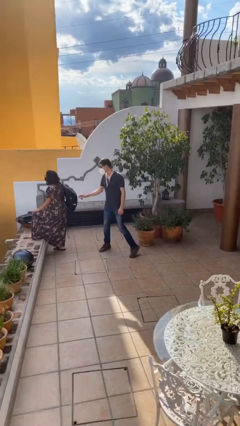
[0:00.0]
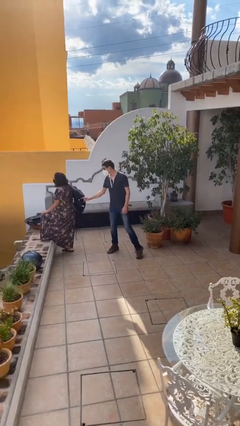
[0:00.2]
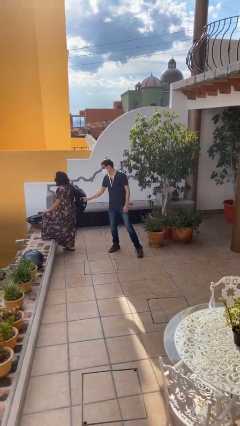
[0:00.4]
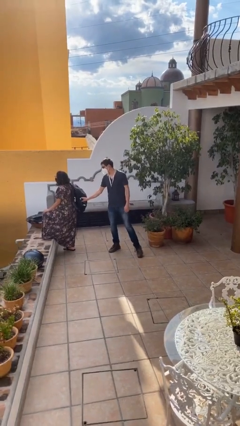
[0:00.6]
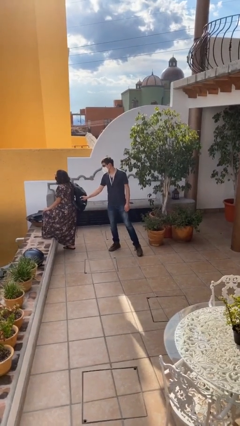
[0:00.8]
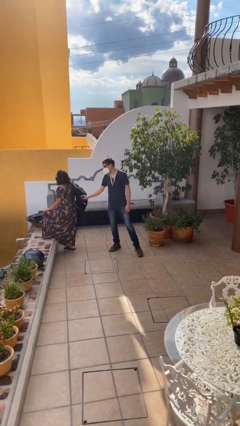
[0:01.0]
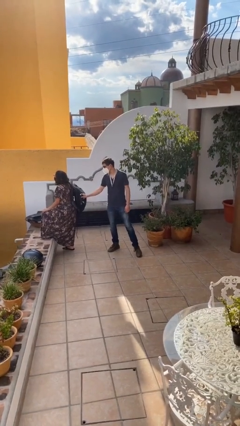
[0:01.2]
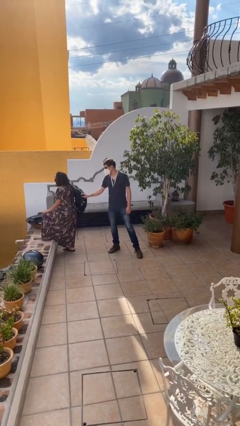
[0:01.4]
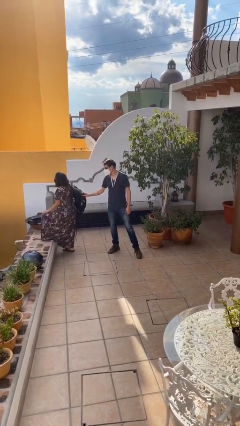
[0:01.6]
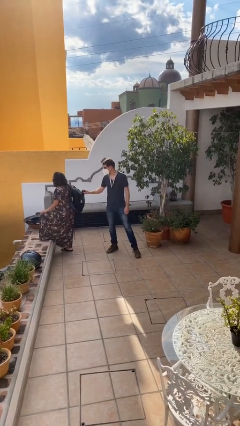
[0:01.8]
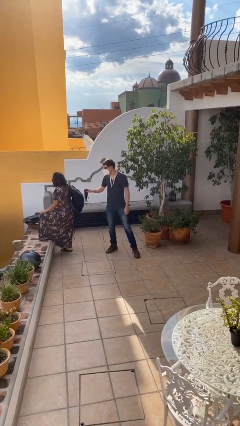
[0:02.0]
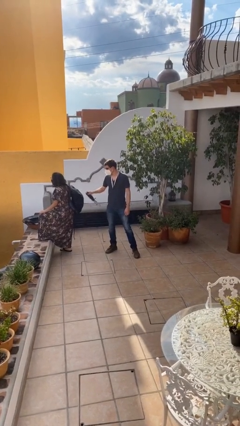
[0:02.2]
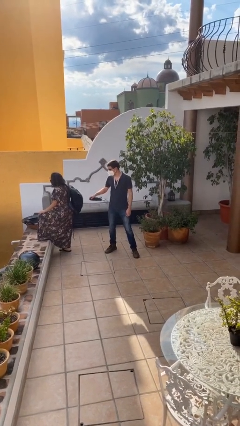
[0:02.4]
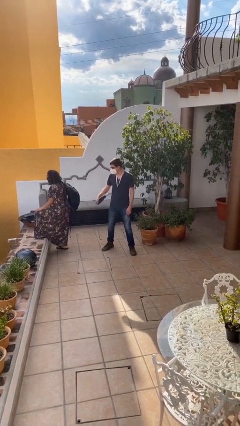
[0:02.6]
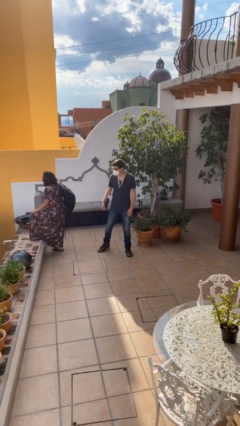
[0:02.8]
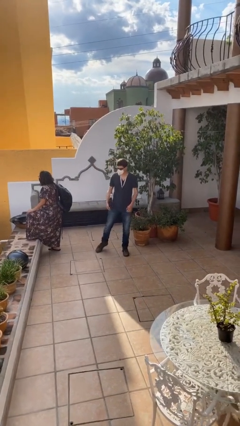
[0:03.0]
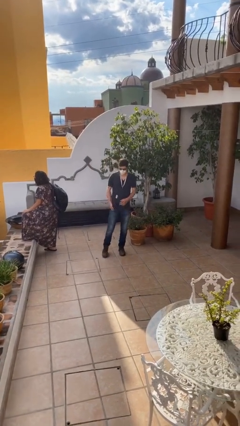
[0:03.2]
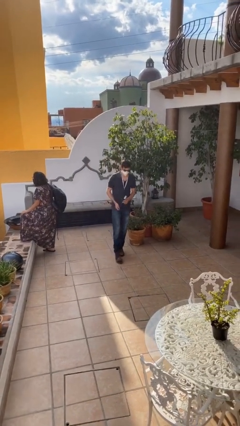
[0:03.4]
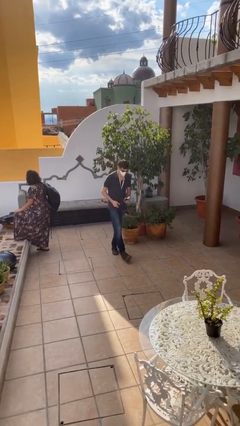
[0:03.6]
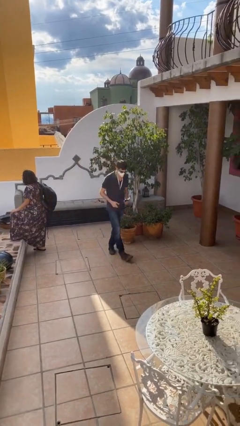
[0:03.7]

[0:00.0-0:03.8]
person steals object from person

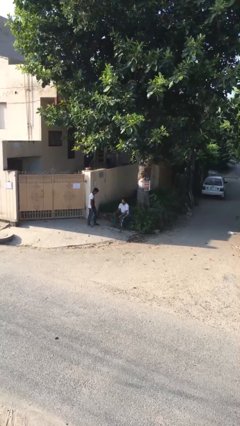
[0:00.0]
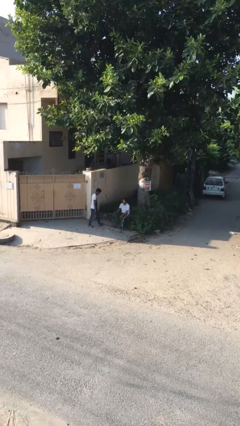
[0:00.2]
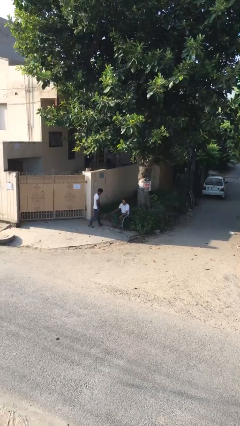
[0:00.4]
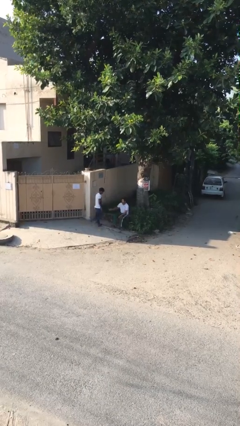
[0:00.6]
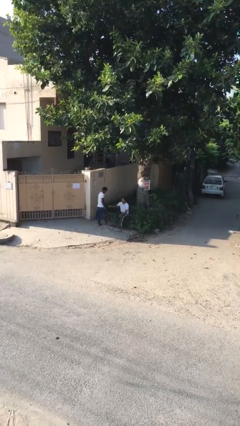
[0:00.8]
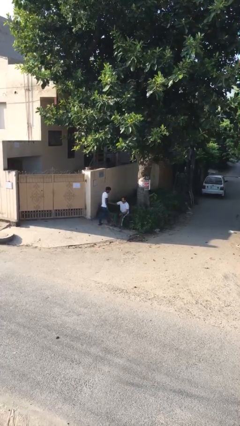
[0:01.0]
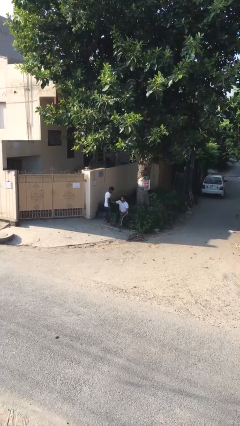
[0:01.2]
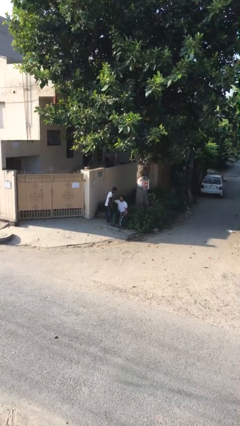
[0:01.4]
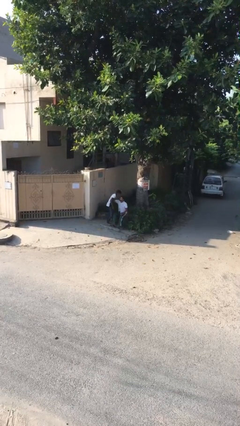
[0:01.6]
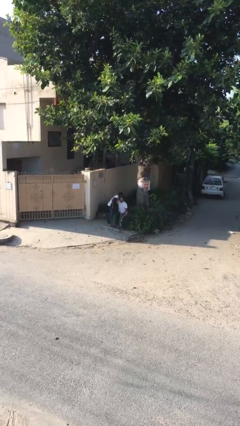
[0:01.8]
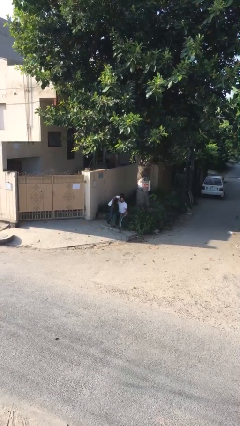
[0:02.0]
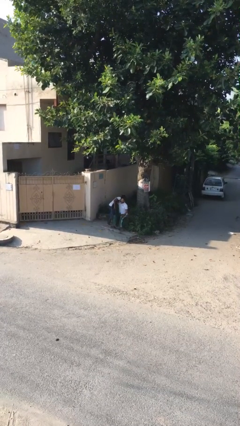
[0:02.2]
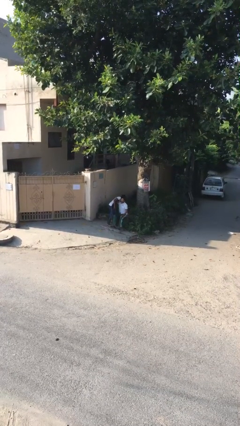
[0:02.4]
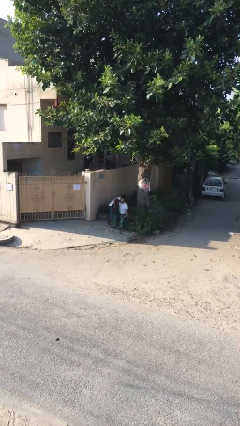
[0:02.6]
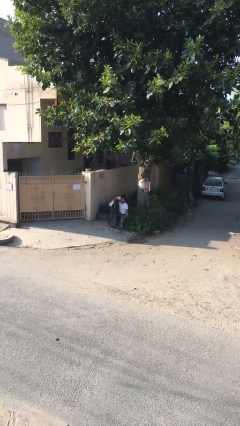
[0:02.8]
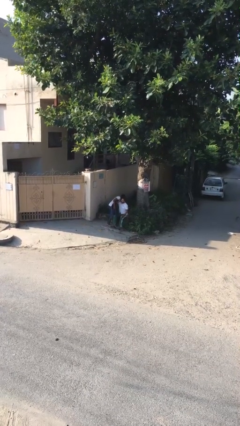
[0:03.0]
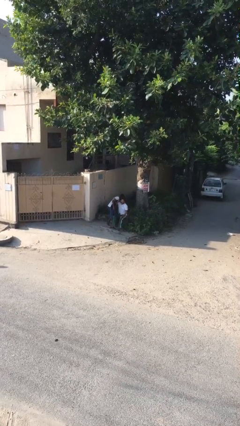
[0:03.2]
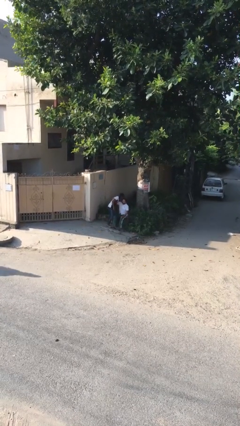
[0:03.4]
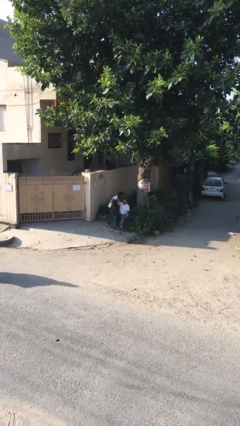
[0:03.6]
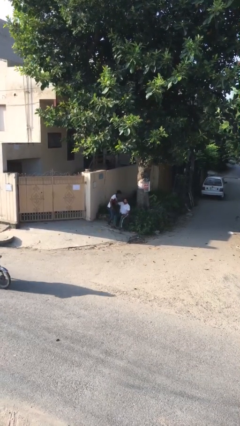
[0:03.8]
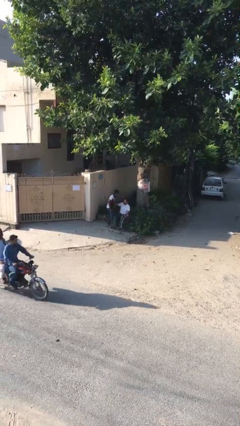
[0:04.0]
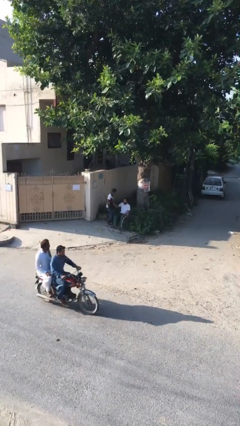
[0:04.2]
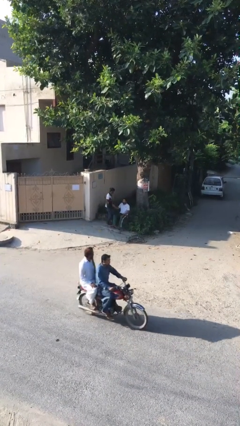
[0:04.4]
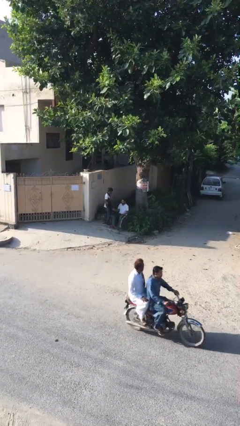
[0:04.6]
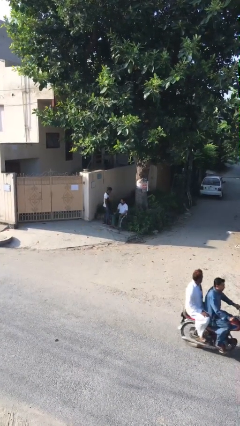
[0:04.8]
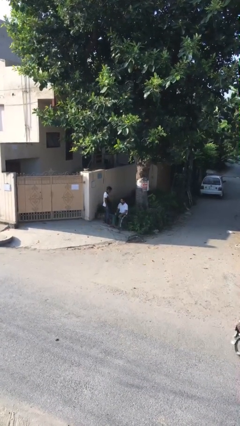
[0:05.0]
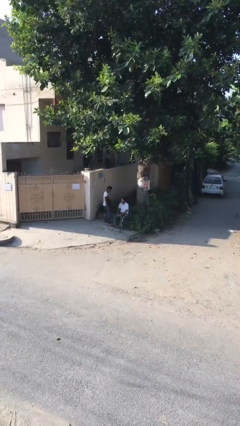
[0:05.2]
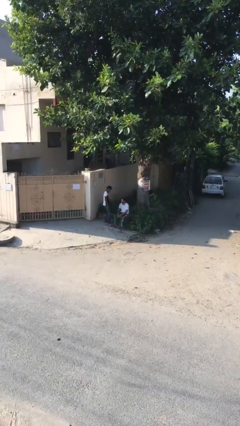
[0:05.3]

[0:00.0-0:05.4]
person embraces person

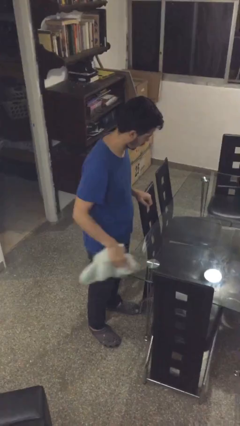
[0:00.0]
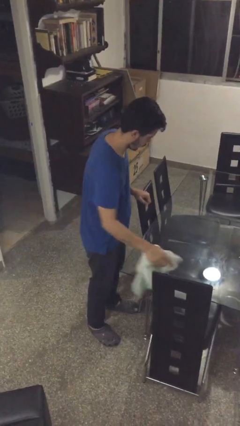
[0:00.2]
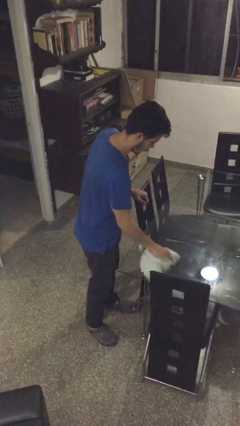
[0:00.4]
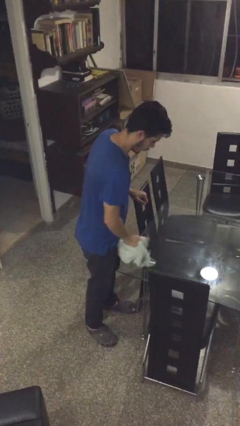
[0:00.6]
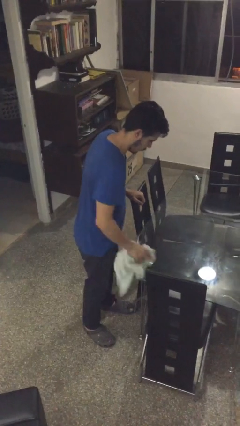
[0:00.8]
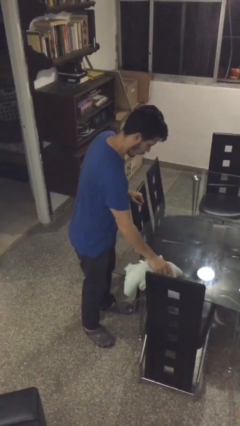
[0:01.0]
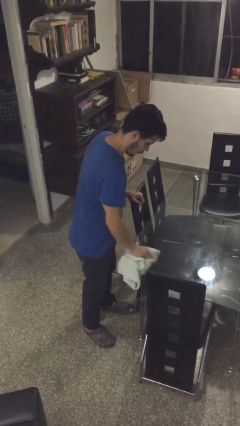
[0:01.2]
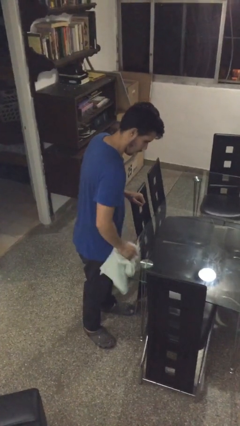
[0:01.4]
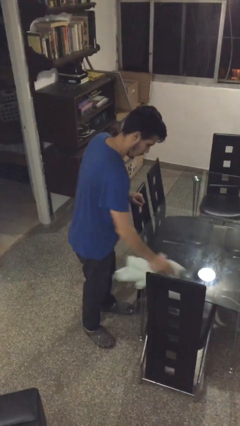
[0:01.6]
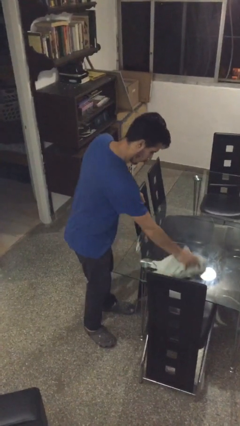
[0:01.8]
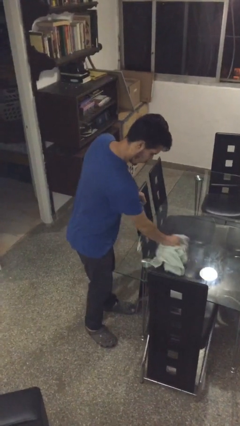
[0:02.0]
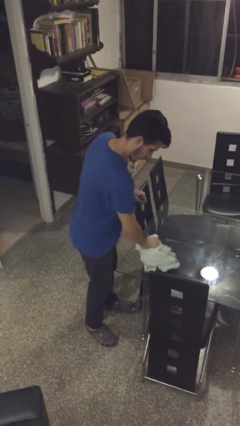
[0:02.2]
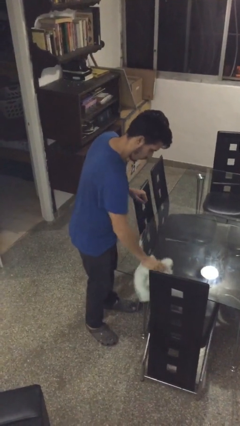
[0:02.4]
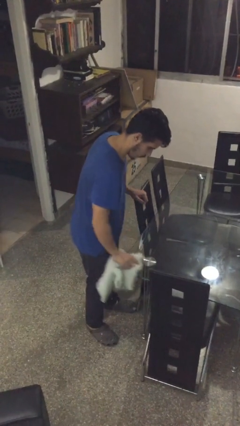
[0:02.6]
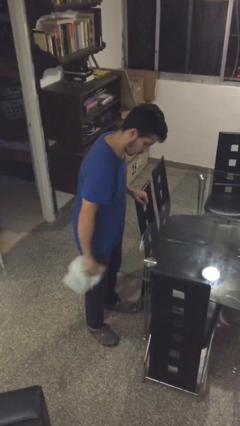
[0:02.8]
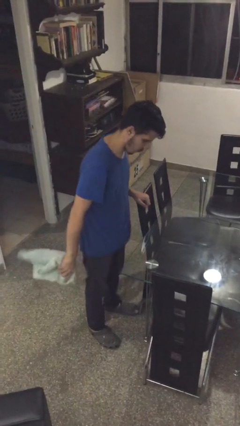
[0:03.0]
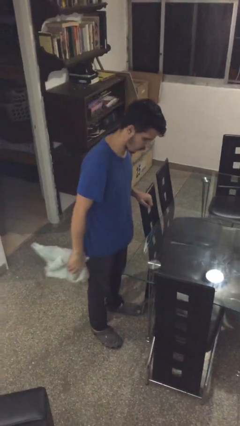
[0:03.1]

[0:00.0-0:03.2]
person cleans table with rag

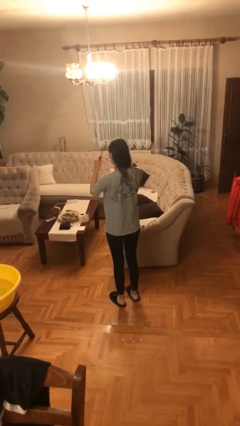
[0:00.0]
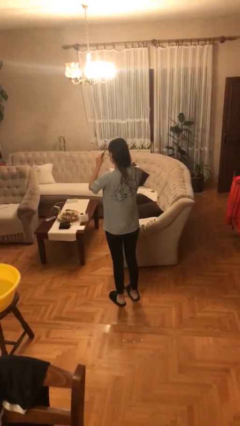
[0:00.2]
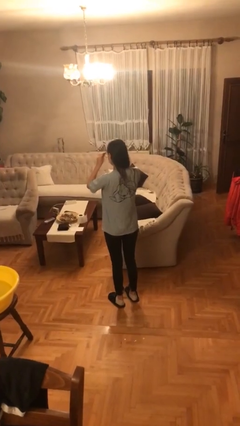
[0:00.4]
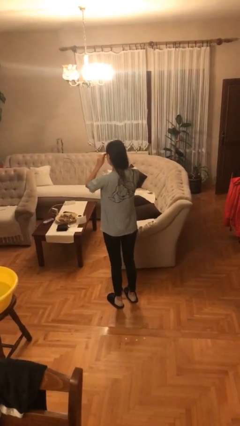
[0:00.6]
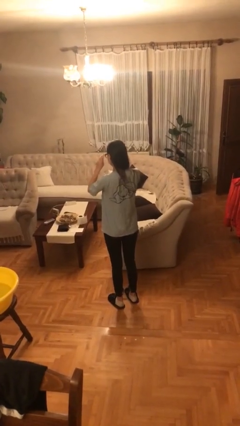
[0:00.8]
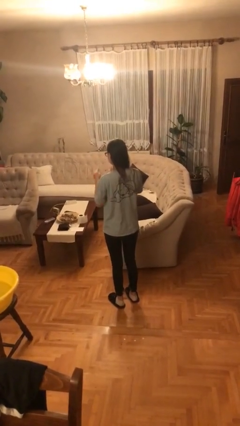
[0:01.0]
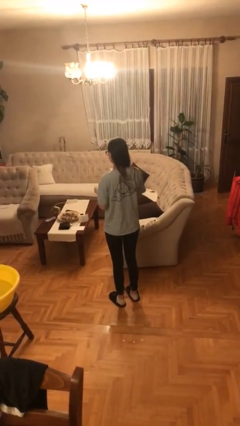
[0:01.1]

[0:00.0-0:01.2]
person puts on glasses

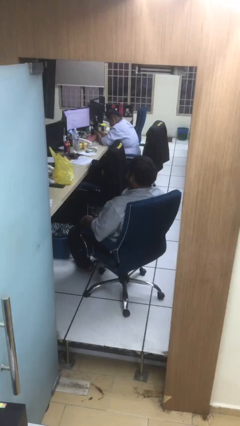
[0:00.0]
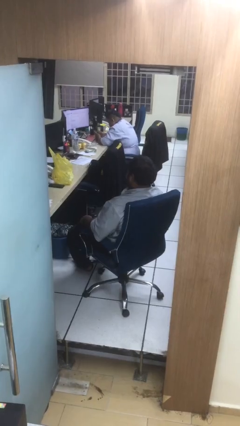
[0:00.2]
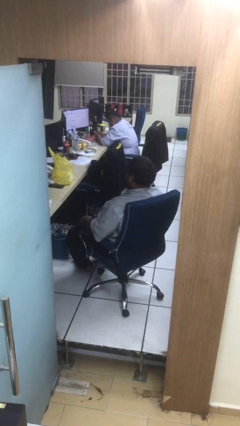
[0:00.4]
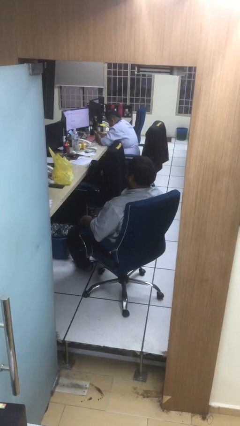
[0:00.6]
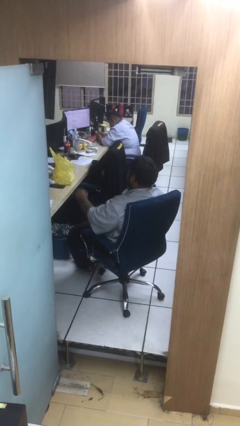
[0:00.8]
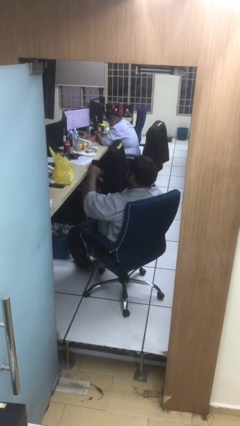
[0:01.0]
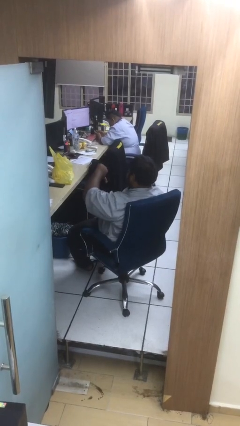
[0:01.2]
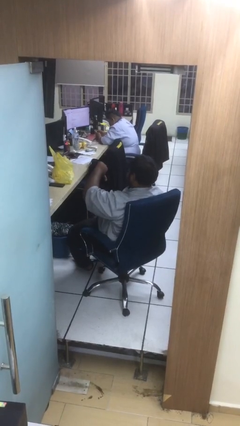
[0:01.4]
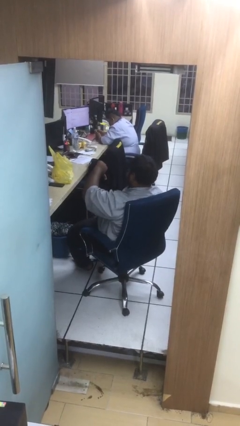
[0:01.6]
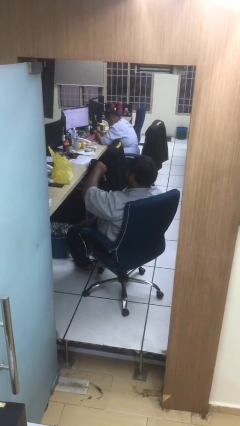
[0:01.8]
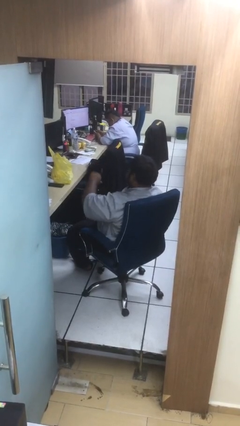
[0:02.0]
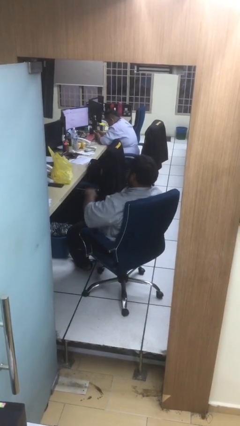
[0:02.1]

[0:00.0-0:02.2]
person gestures thumbs down

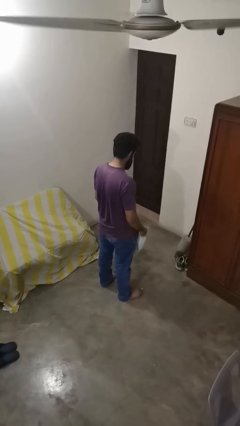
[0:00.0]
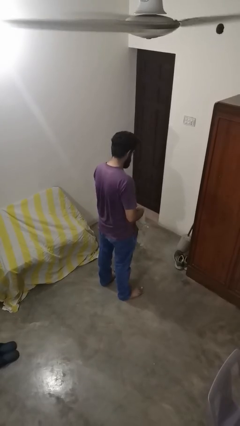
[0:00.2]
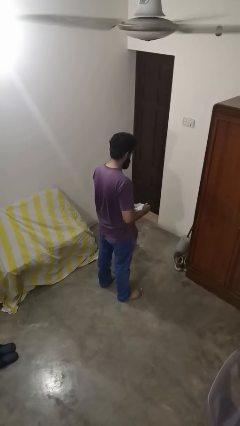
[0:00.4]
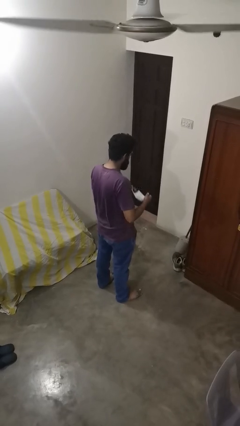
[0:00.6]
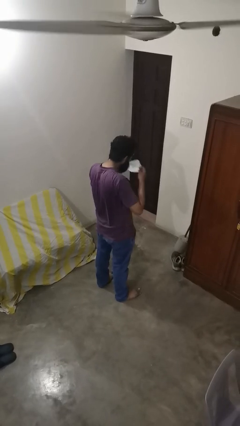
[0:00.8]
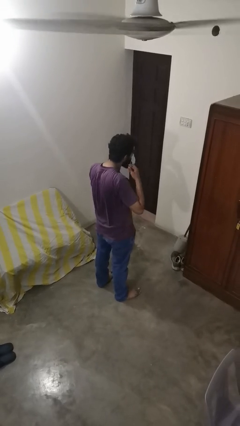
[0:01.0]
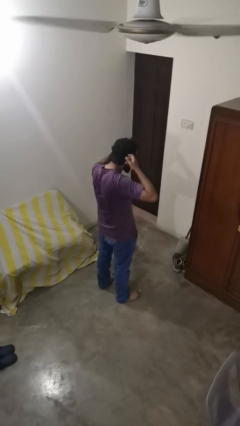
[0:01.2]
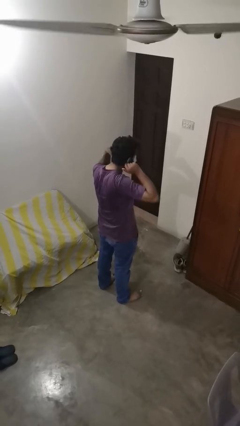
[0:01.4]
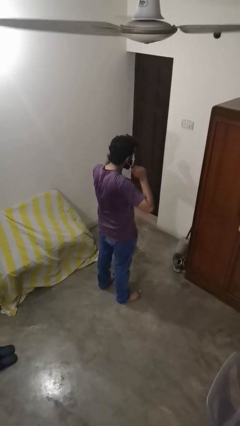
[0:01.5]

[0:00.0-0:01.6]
person puts on facemask
